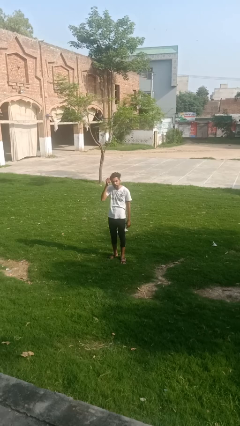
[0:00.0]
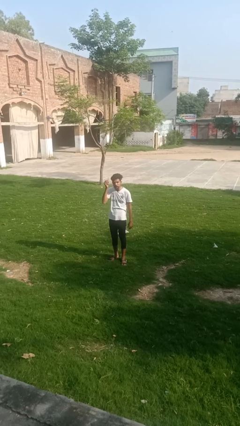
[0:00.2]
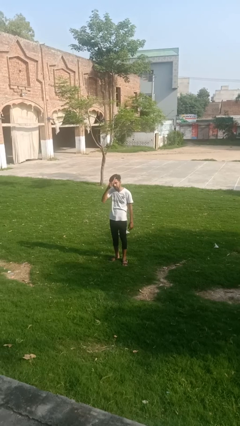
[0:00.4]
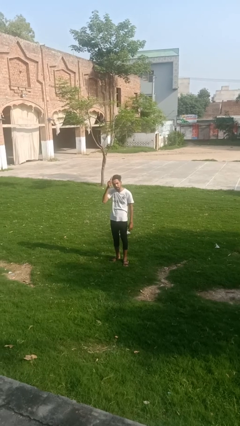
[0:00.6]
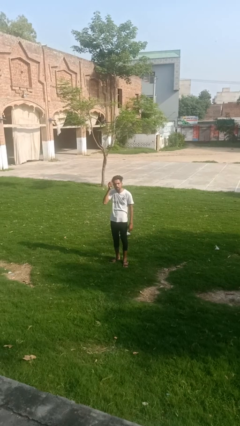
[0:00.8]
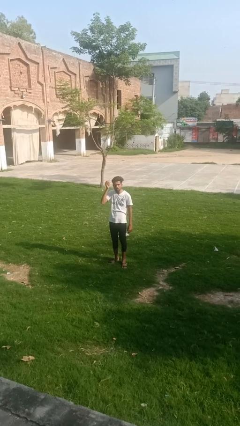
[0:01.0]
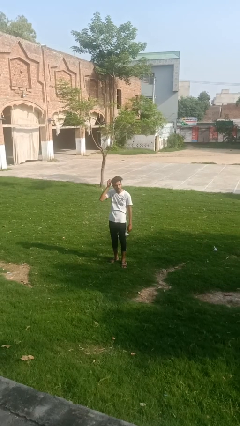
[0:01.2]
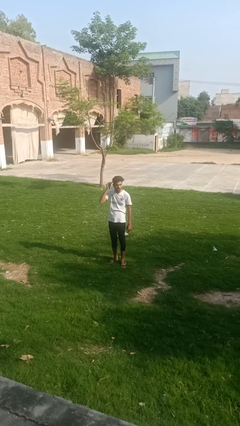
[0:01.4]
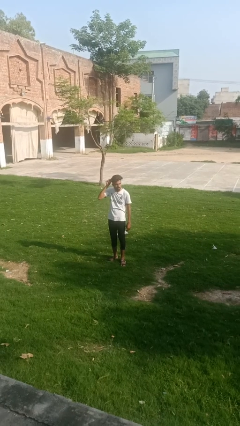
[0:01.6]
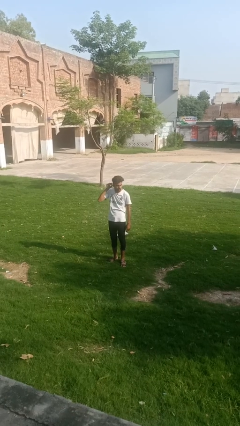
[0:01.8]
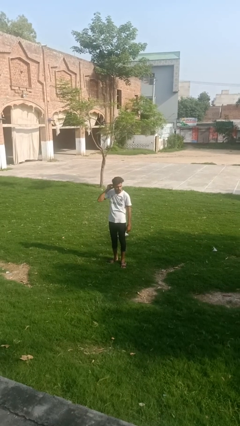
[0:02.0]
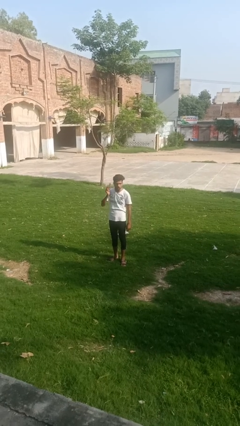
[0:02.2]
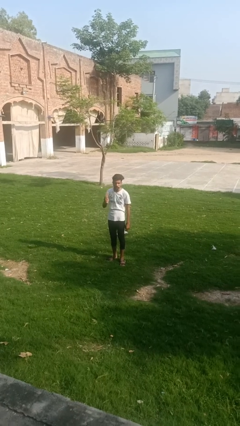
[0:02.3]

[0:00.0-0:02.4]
person brushes hair

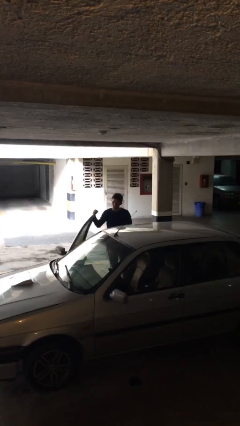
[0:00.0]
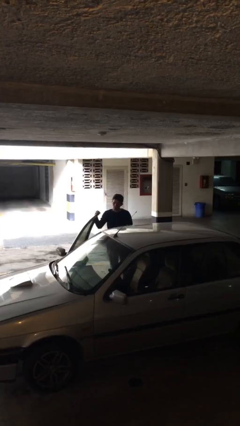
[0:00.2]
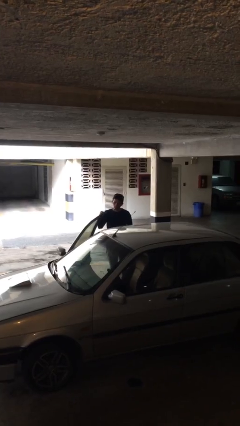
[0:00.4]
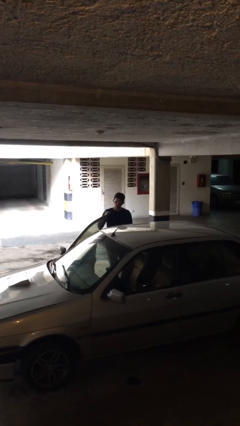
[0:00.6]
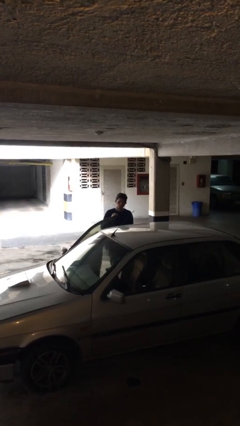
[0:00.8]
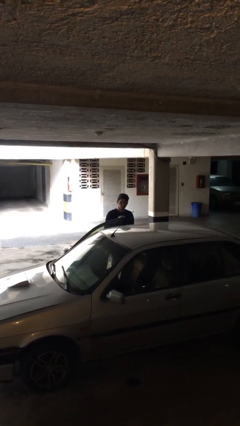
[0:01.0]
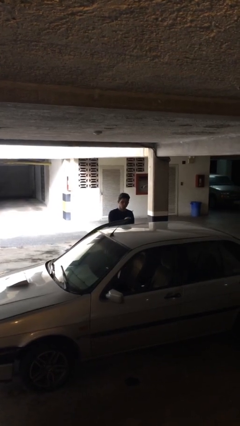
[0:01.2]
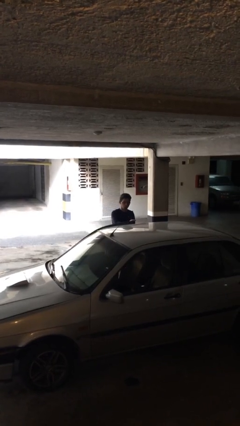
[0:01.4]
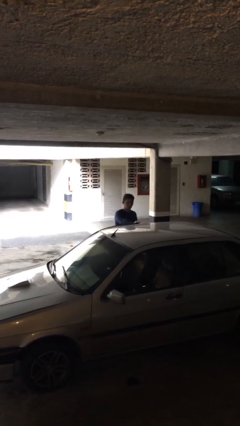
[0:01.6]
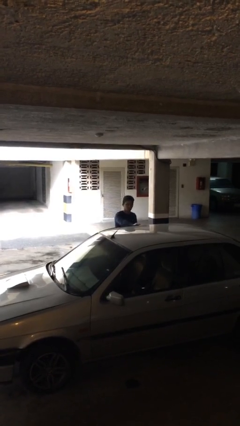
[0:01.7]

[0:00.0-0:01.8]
person closes car door

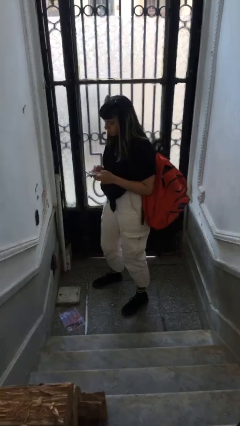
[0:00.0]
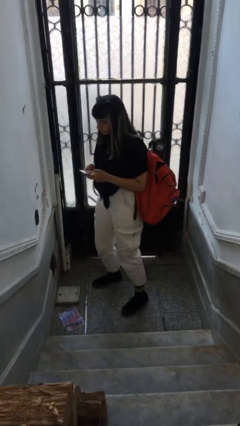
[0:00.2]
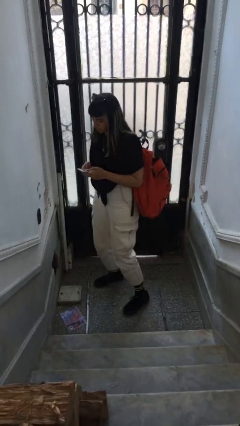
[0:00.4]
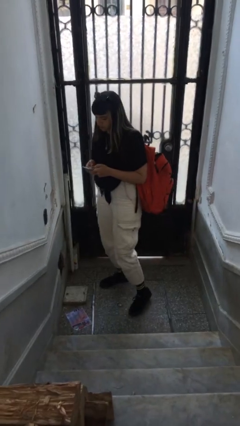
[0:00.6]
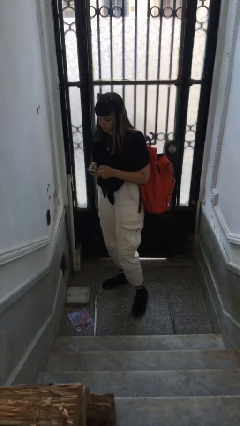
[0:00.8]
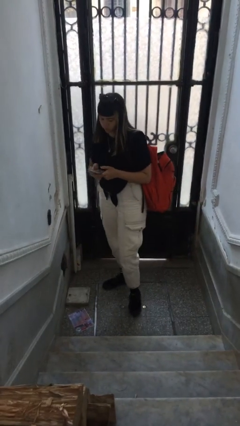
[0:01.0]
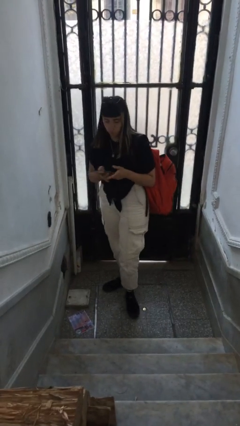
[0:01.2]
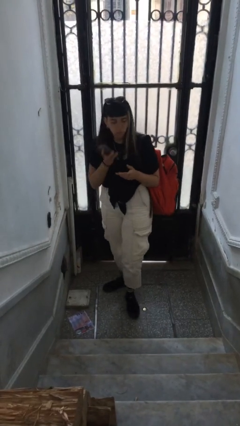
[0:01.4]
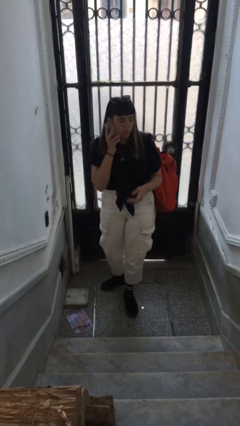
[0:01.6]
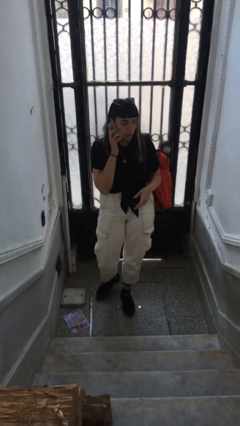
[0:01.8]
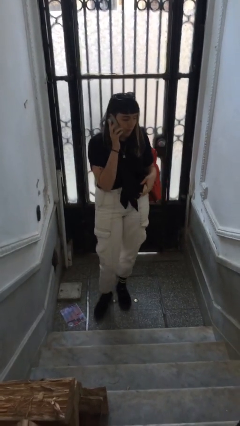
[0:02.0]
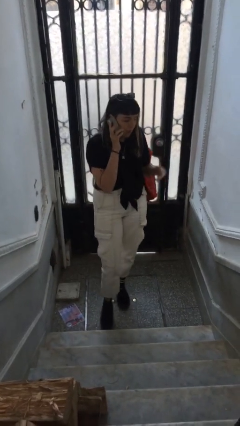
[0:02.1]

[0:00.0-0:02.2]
person talks on phone

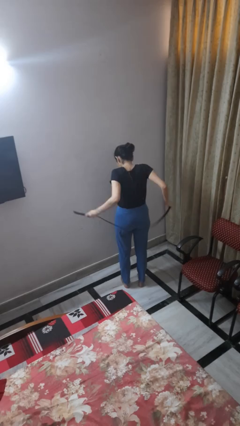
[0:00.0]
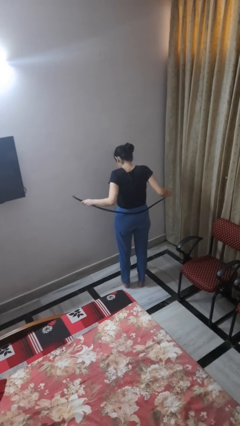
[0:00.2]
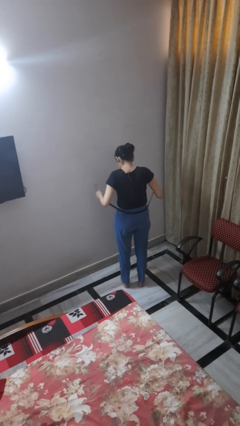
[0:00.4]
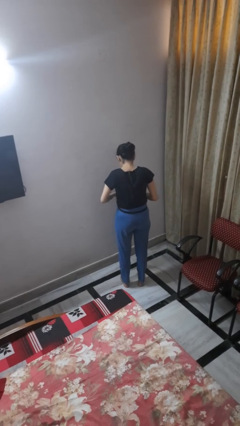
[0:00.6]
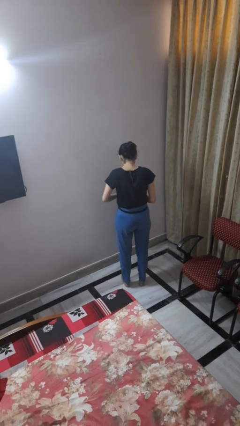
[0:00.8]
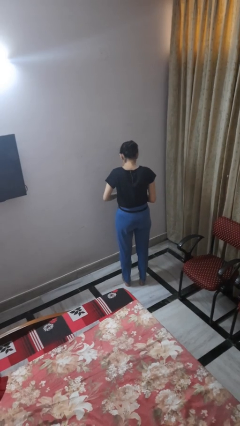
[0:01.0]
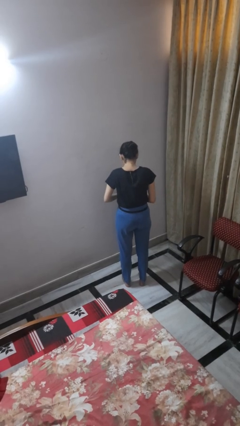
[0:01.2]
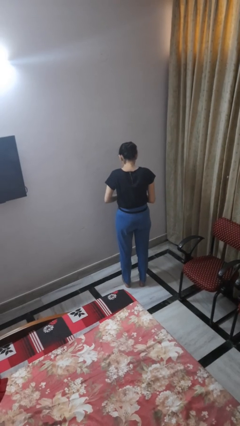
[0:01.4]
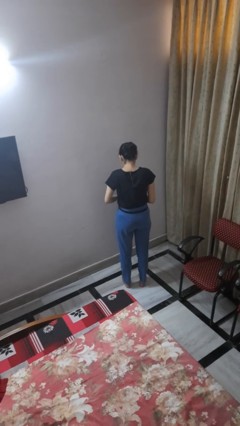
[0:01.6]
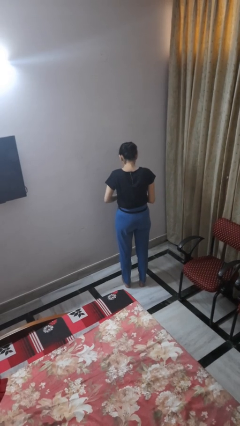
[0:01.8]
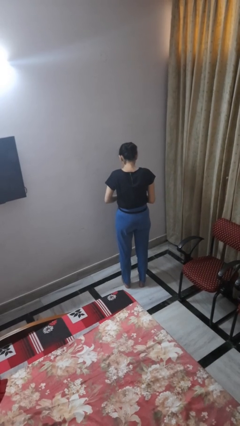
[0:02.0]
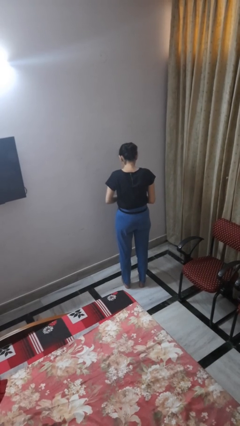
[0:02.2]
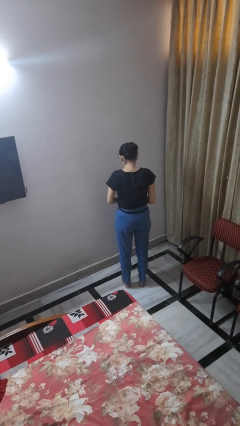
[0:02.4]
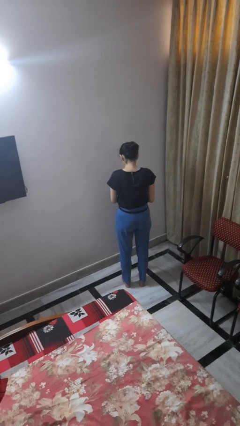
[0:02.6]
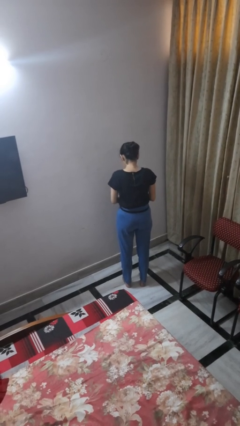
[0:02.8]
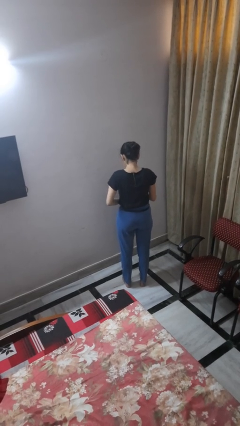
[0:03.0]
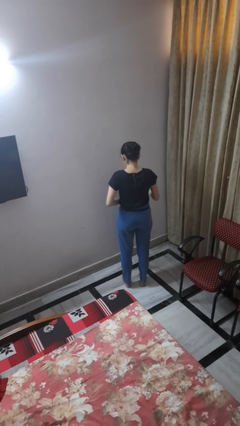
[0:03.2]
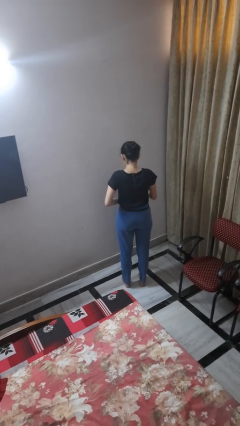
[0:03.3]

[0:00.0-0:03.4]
person puts on belt

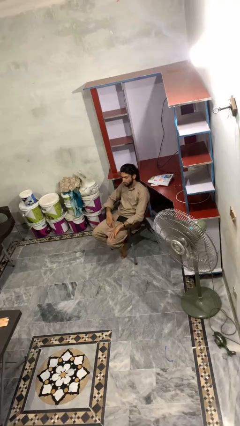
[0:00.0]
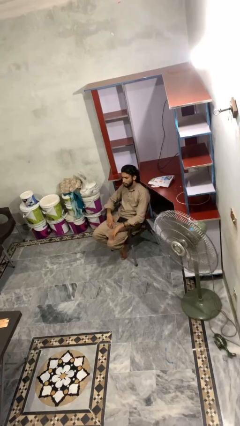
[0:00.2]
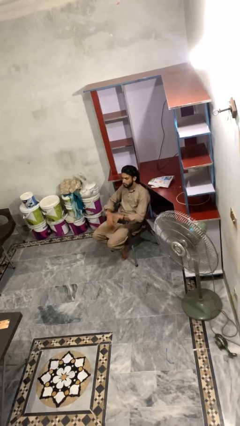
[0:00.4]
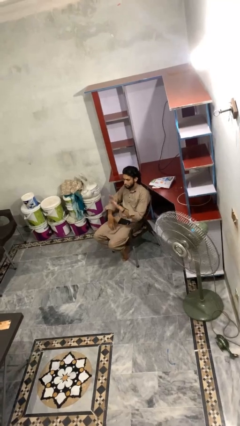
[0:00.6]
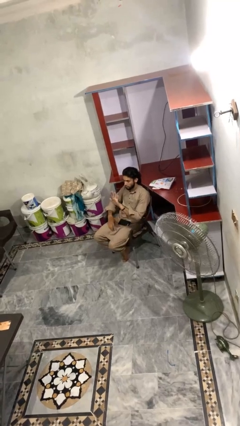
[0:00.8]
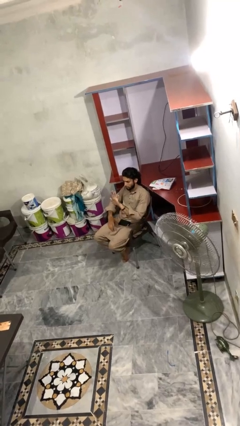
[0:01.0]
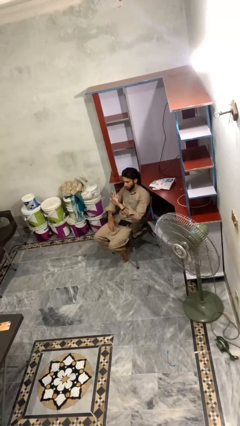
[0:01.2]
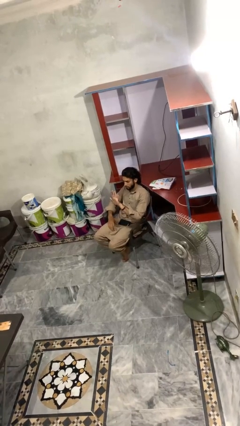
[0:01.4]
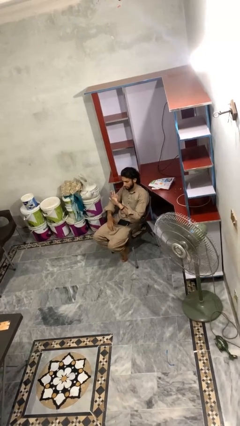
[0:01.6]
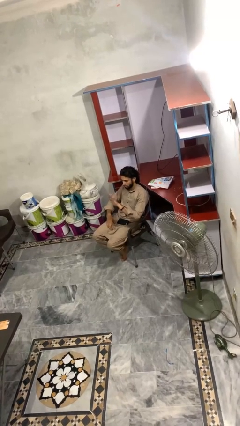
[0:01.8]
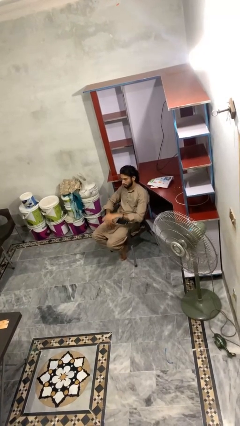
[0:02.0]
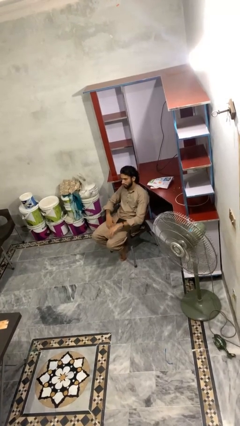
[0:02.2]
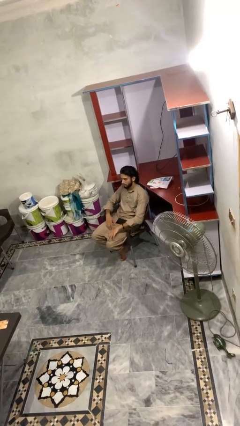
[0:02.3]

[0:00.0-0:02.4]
person gestures number five

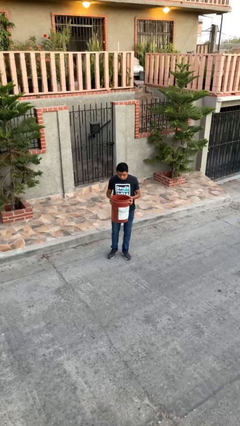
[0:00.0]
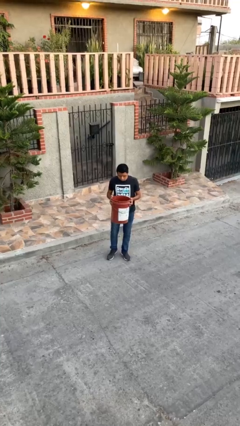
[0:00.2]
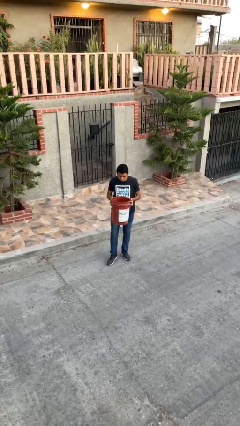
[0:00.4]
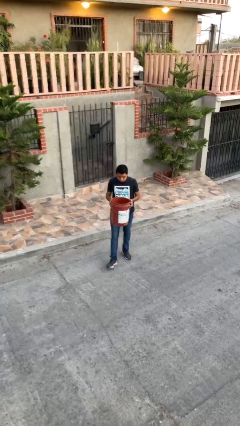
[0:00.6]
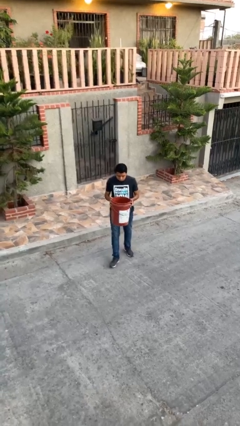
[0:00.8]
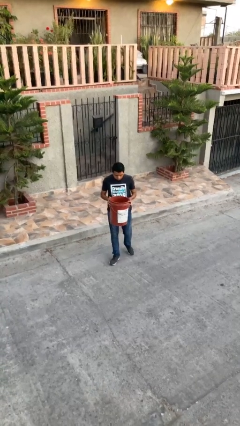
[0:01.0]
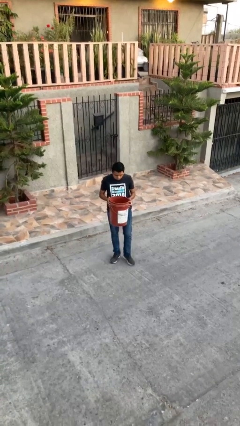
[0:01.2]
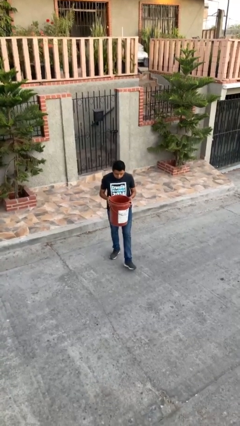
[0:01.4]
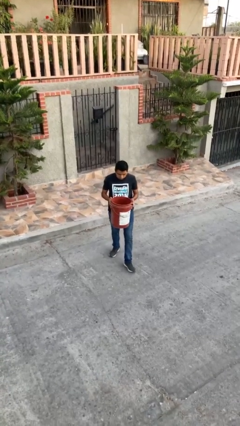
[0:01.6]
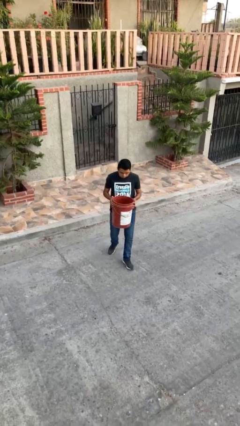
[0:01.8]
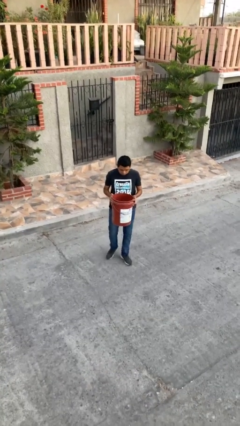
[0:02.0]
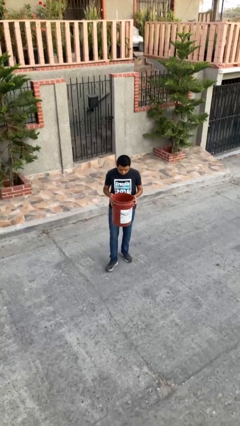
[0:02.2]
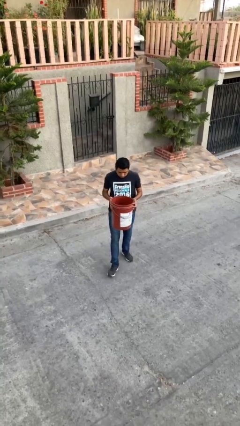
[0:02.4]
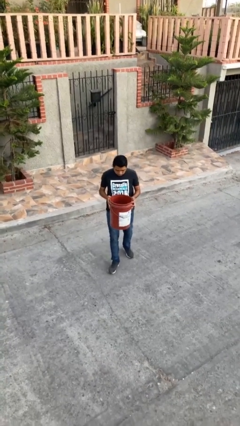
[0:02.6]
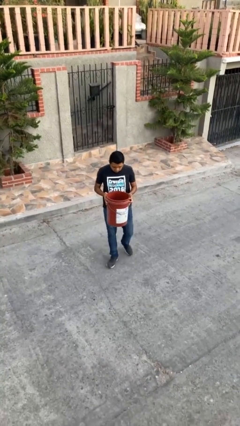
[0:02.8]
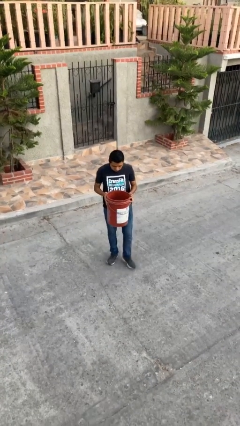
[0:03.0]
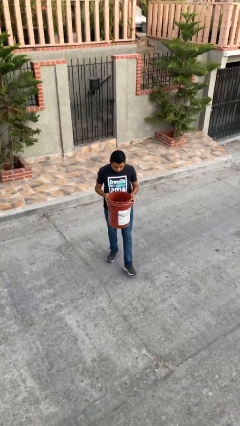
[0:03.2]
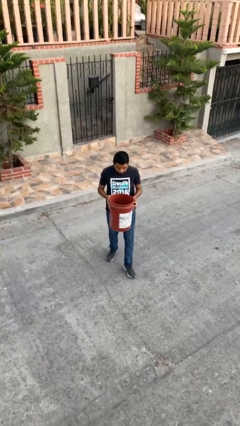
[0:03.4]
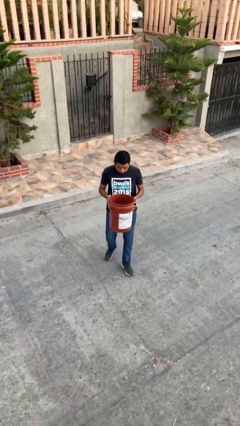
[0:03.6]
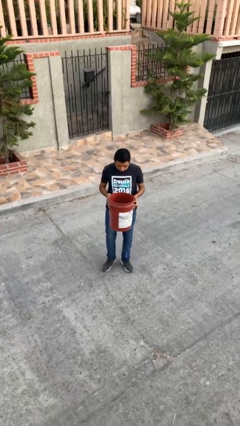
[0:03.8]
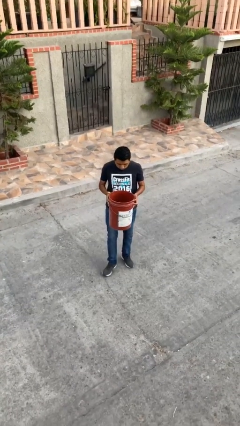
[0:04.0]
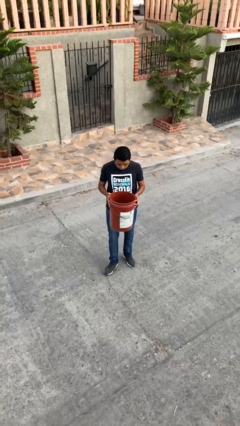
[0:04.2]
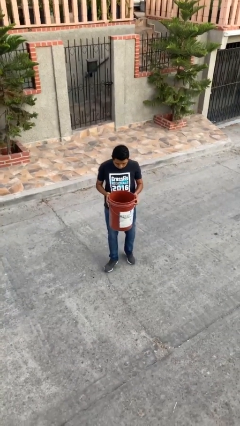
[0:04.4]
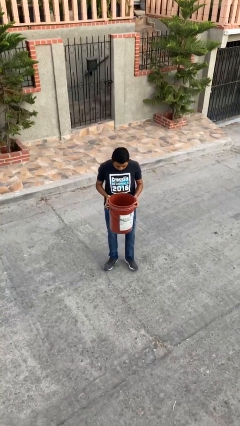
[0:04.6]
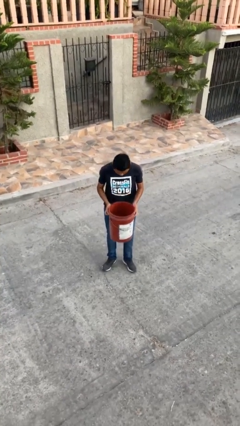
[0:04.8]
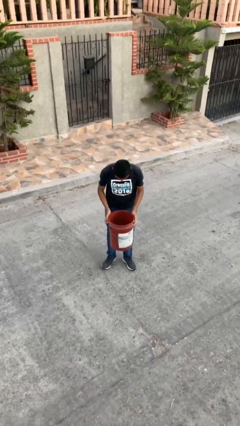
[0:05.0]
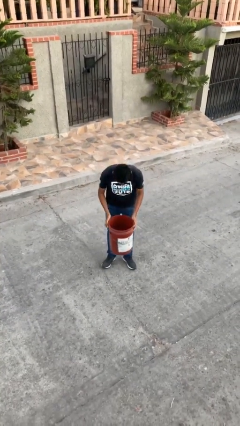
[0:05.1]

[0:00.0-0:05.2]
person carries heavy object
